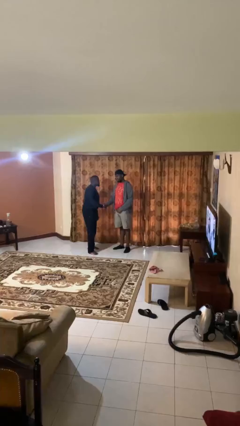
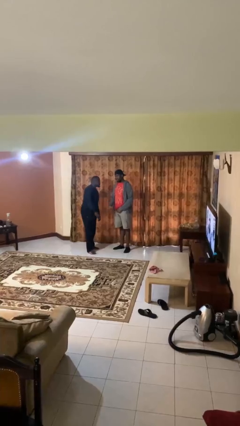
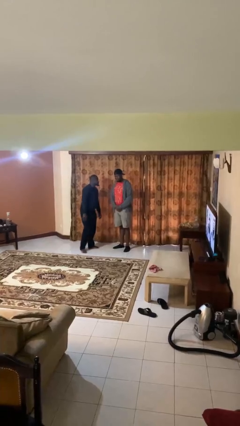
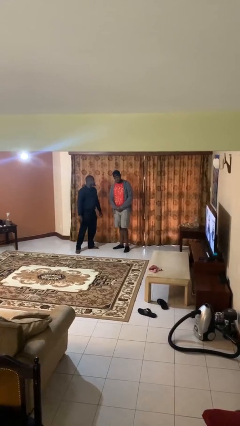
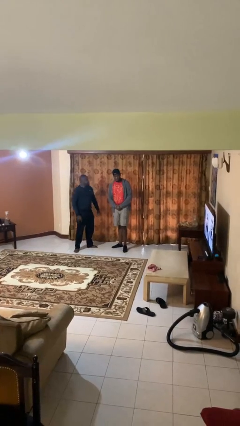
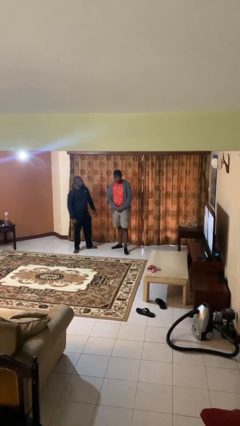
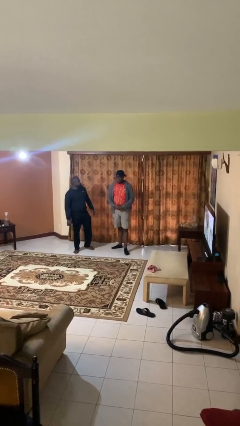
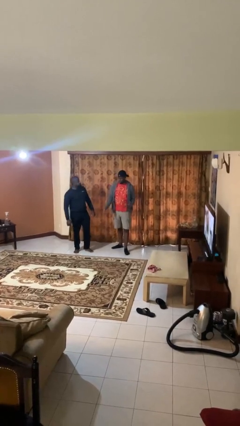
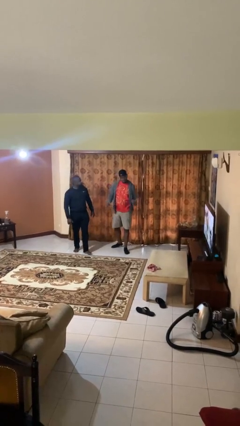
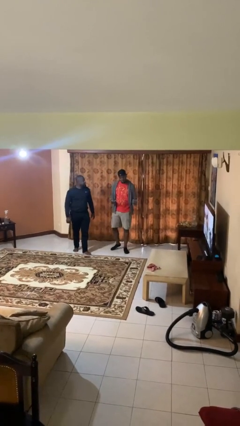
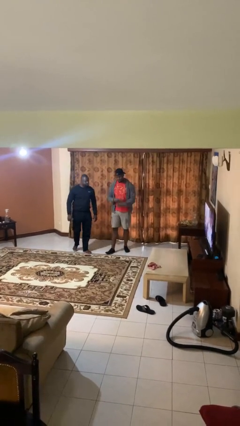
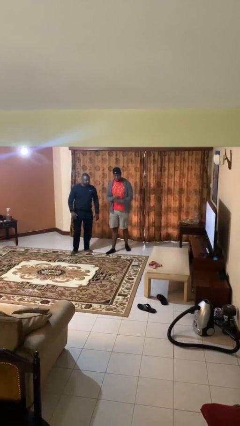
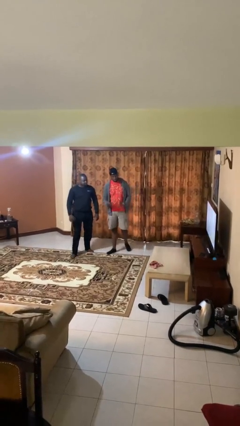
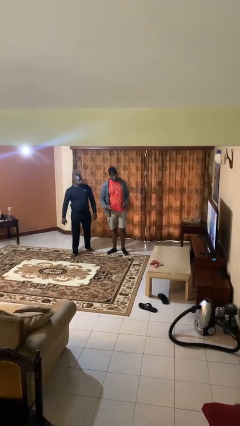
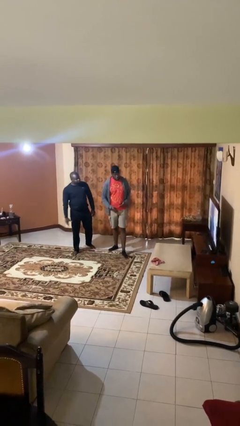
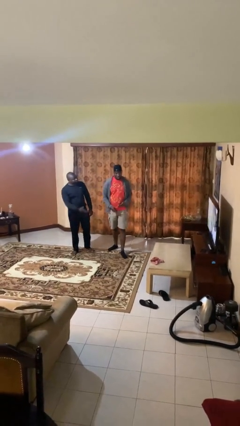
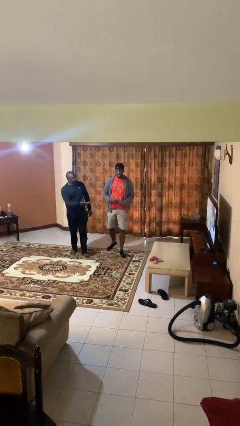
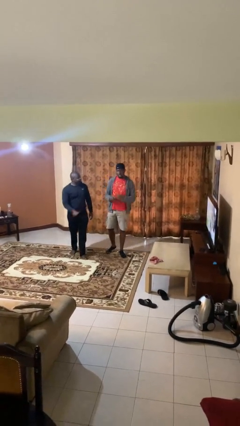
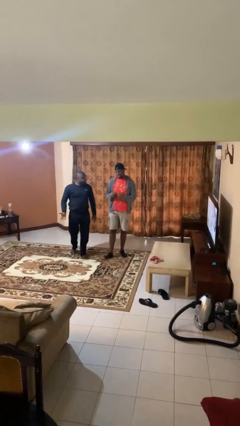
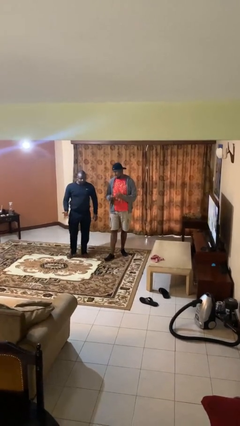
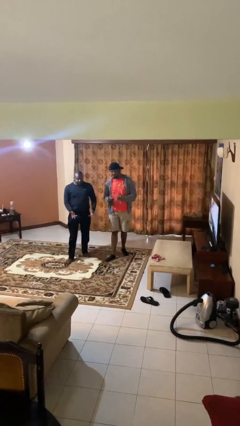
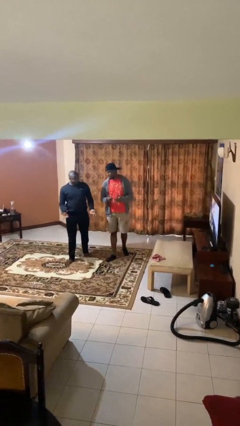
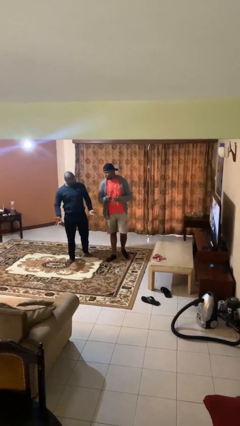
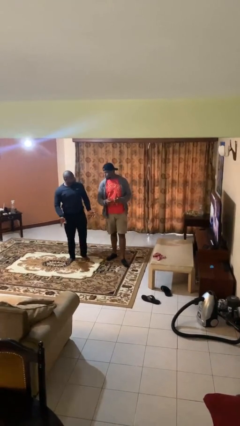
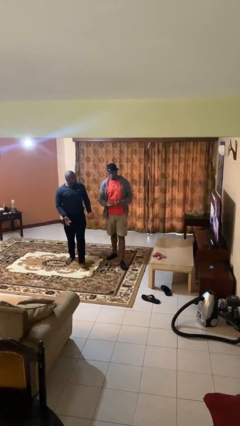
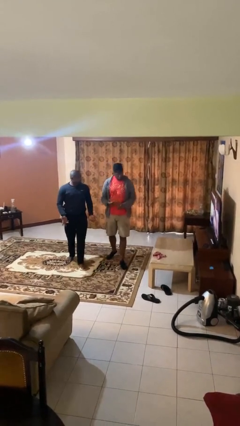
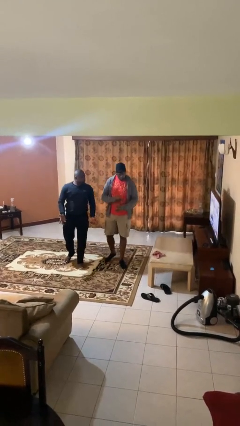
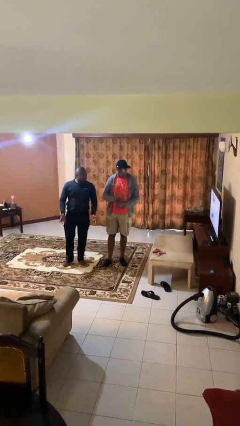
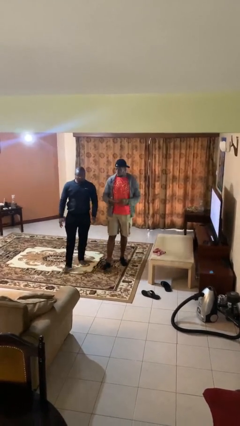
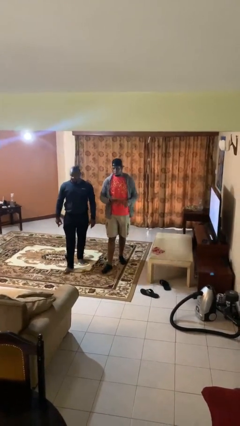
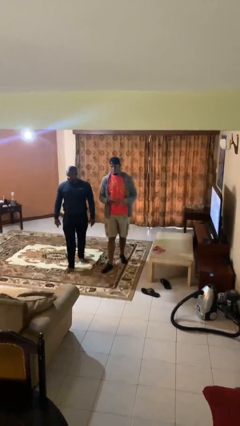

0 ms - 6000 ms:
person talks to person

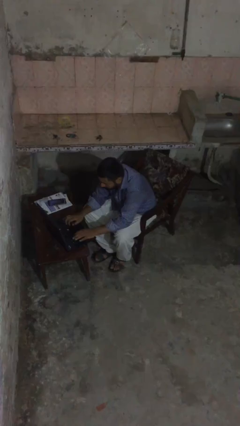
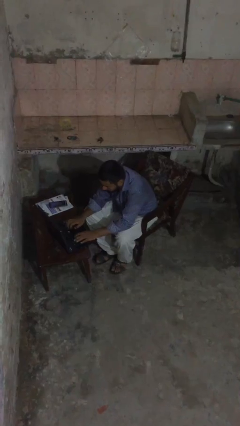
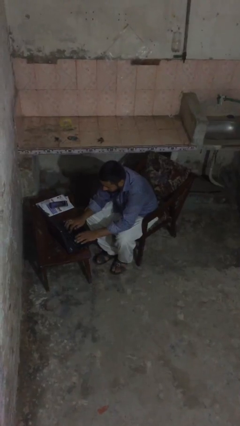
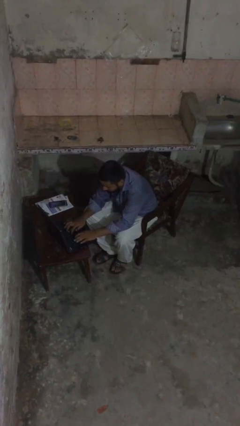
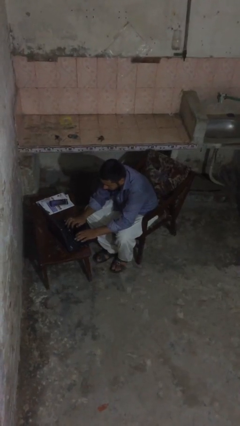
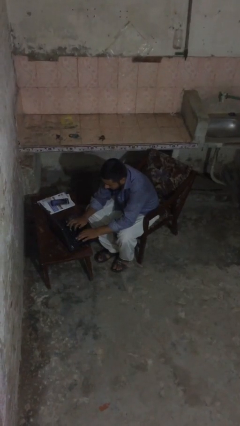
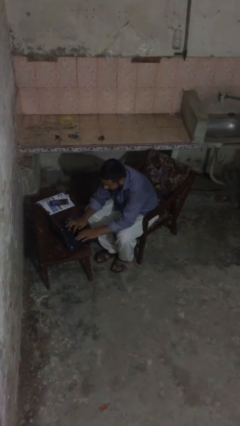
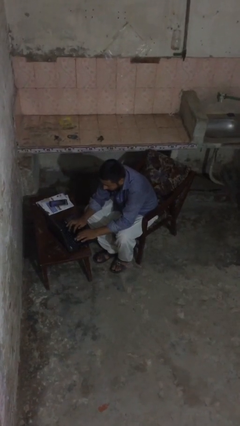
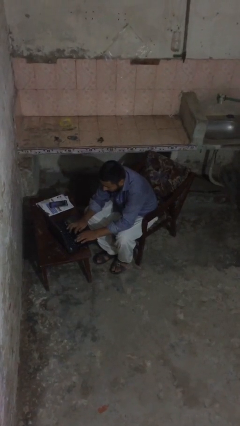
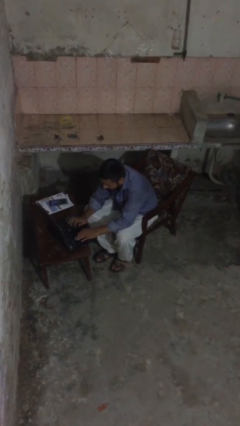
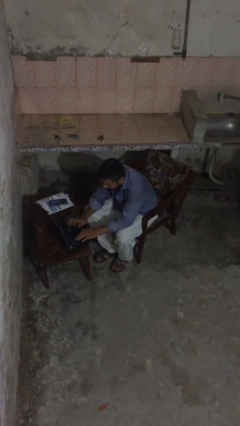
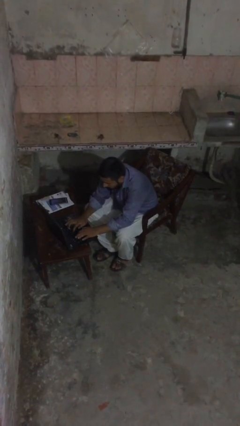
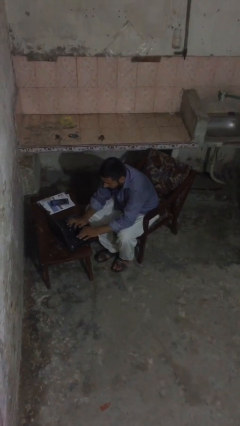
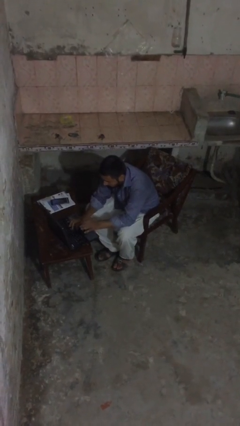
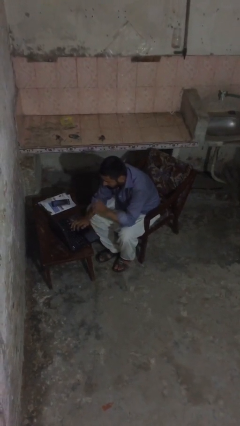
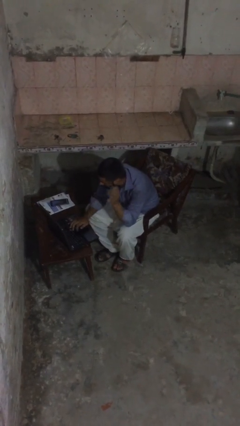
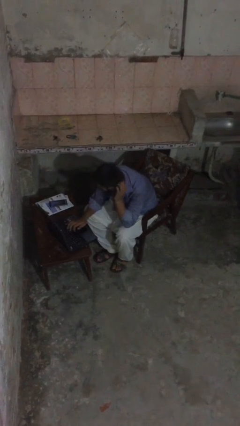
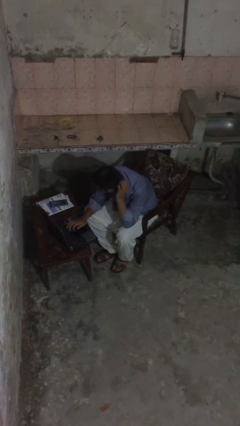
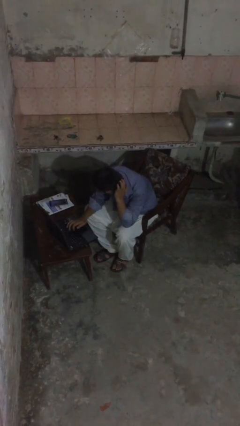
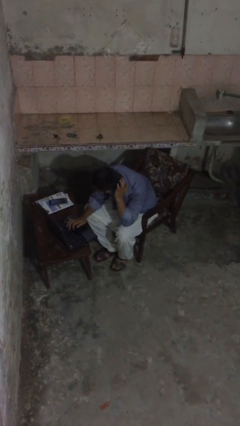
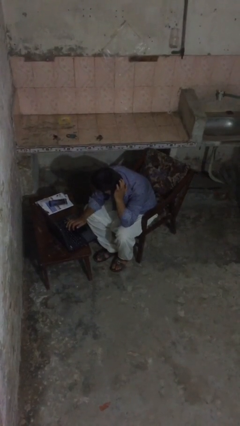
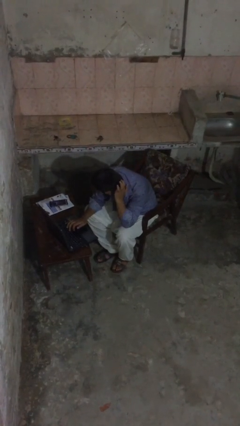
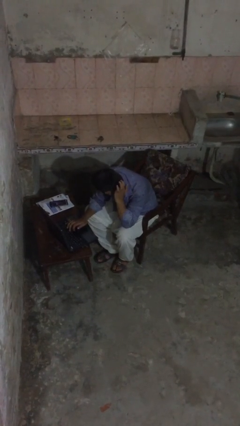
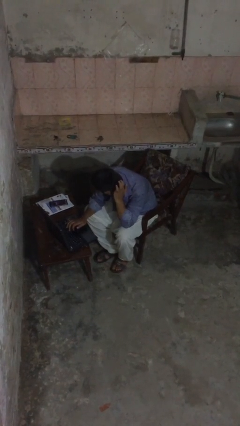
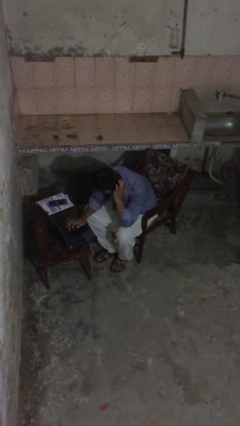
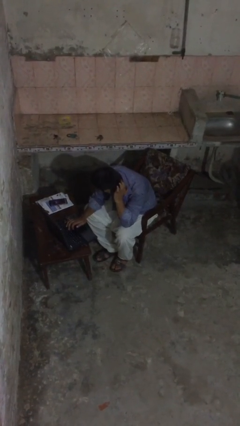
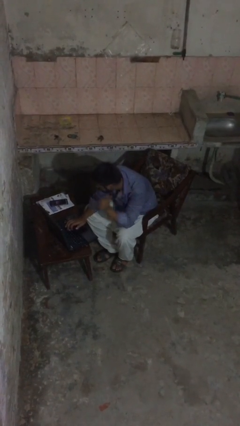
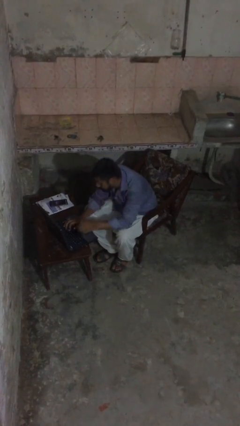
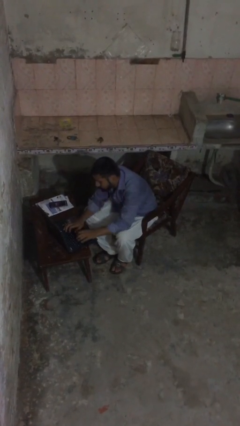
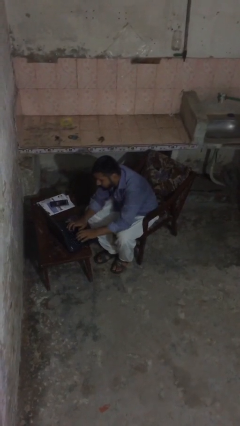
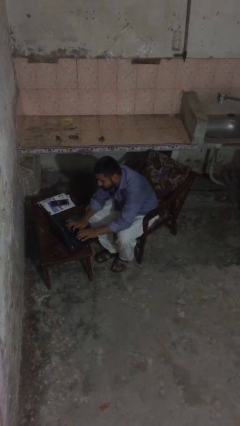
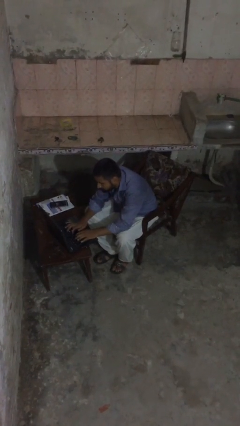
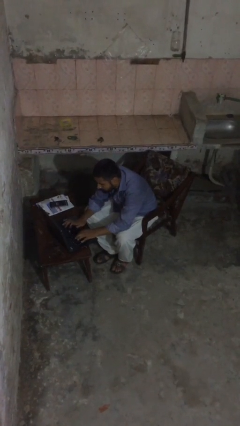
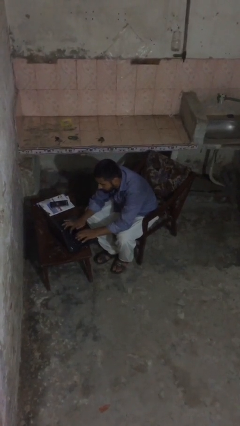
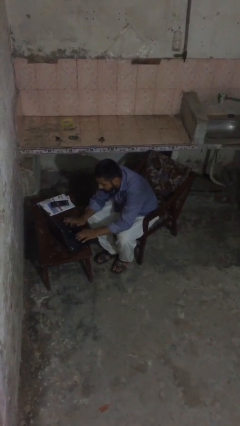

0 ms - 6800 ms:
person interacts with laptop

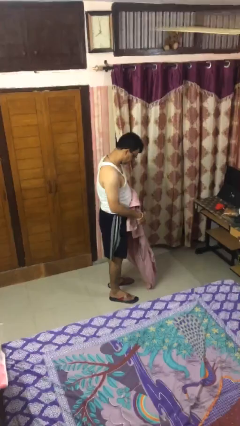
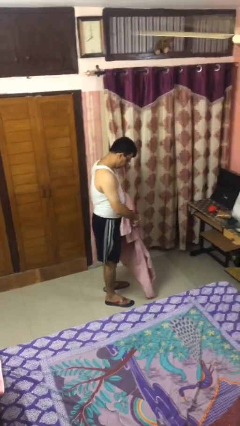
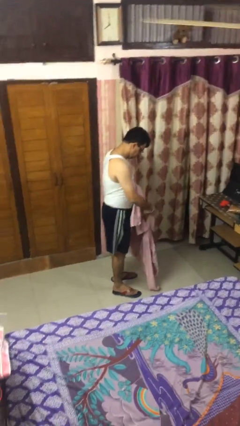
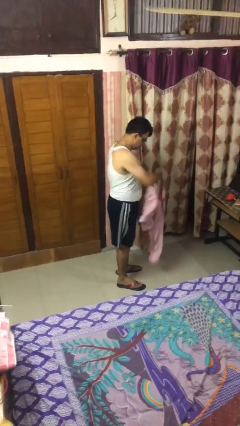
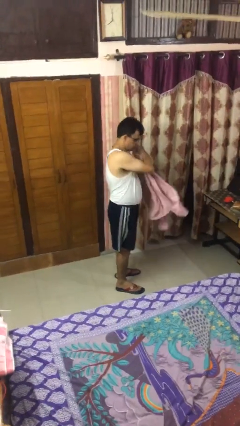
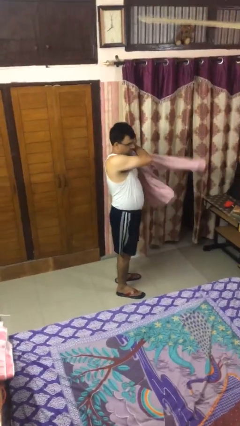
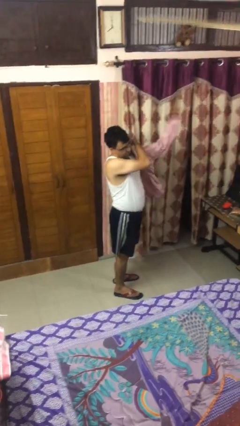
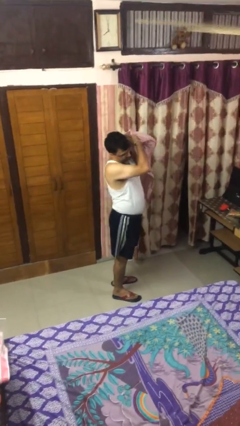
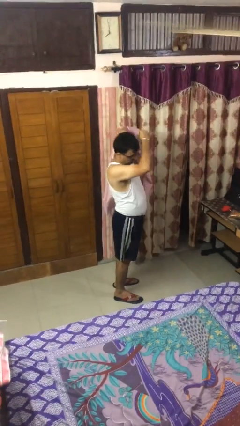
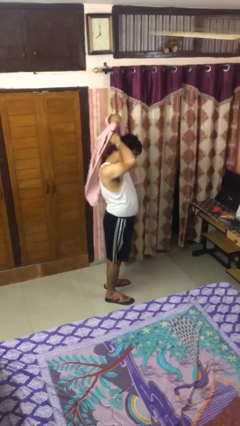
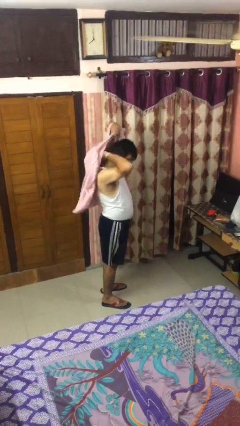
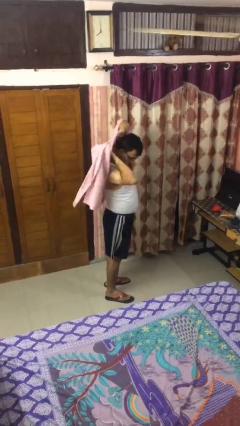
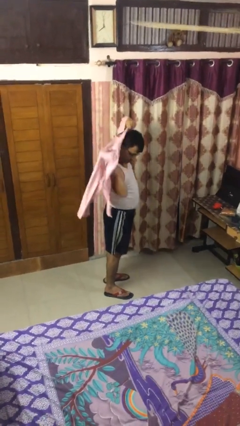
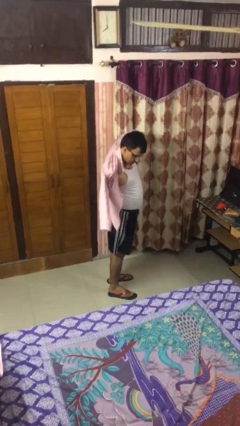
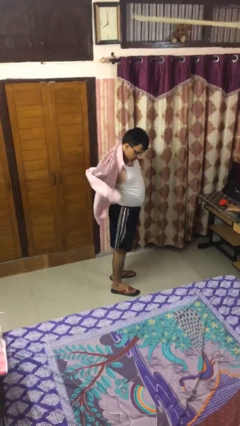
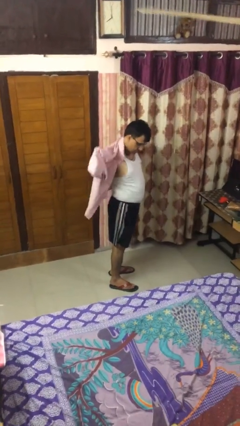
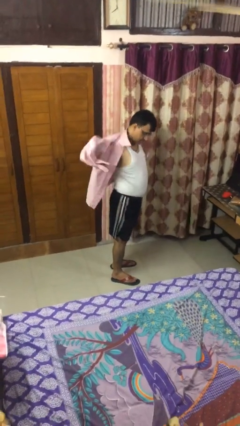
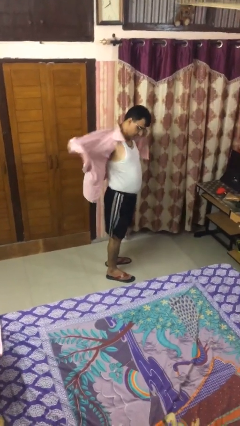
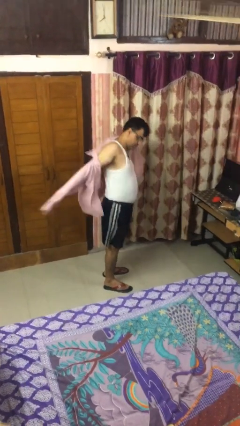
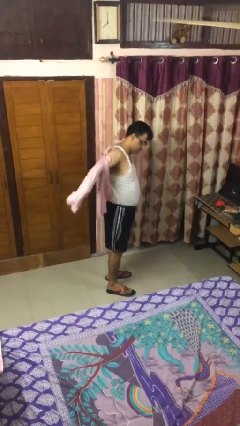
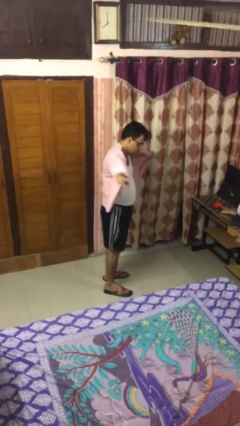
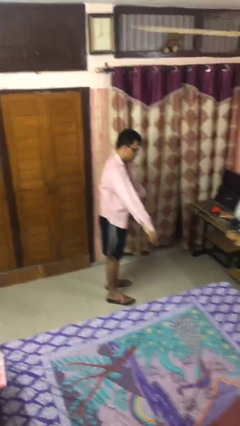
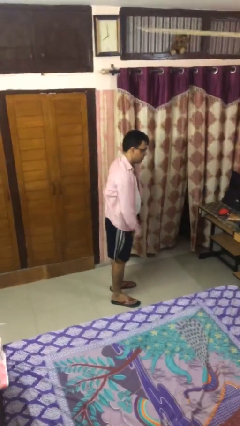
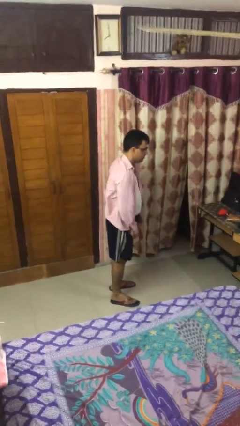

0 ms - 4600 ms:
person puts on shirt

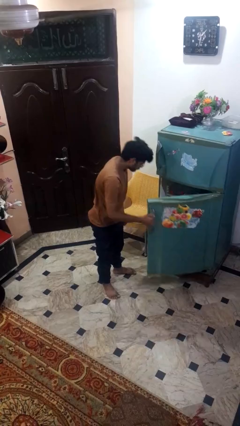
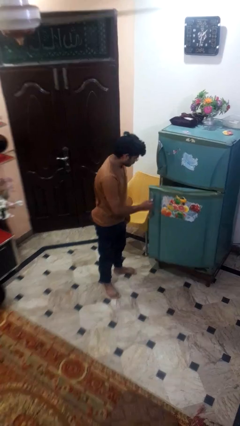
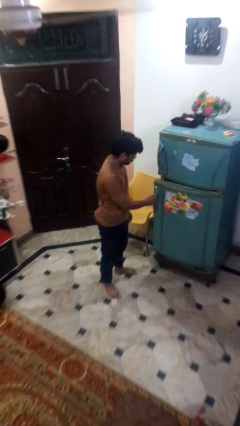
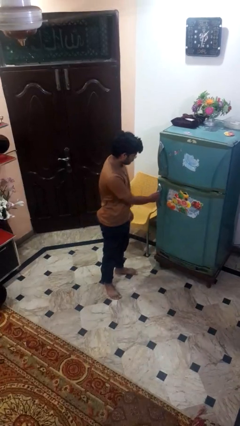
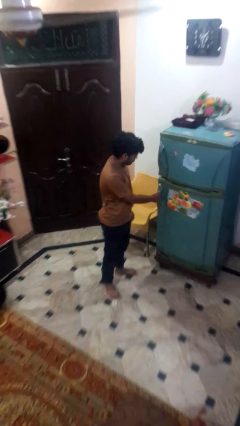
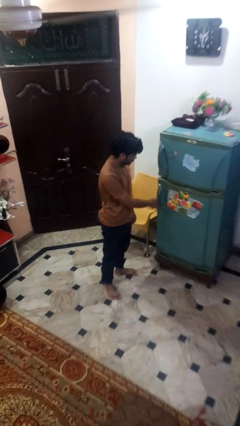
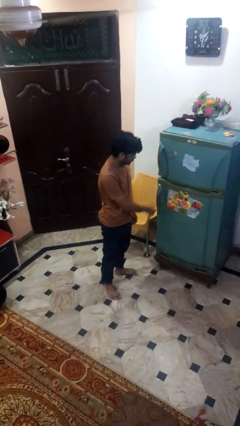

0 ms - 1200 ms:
person closes refrigerator
